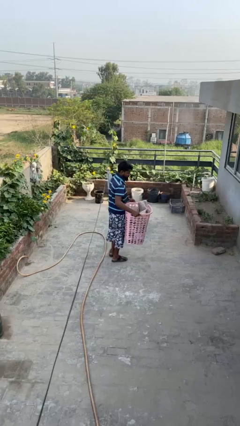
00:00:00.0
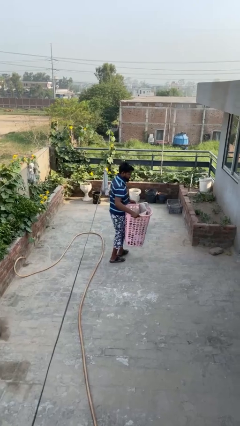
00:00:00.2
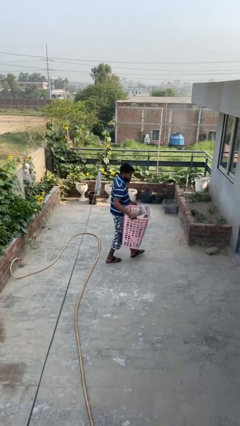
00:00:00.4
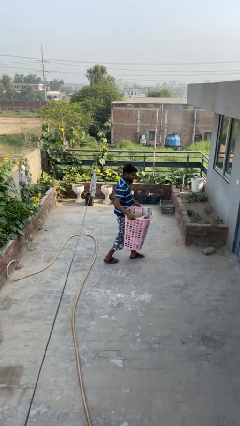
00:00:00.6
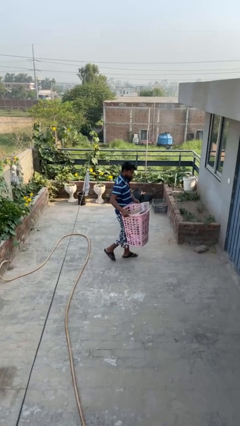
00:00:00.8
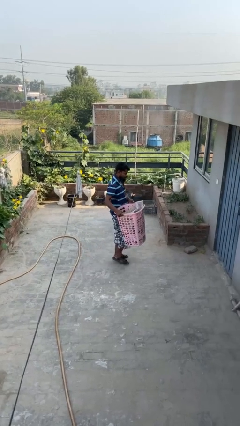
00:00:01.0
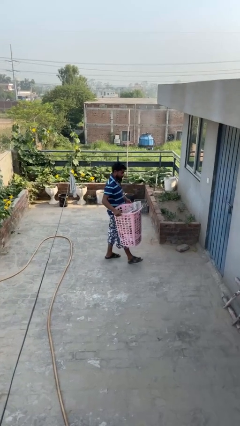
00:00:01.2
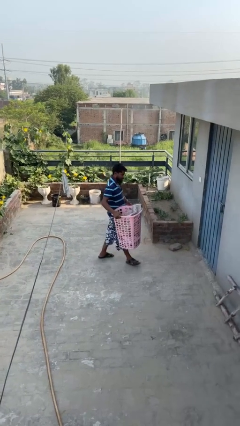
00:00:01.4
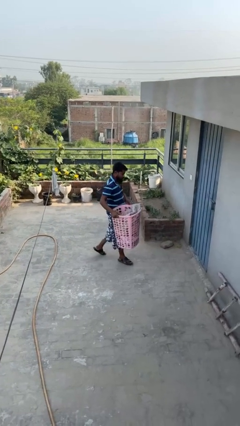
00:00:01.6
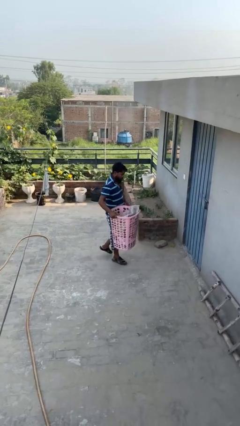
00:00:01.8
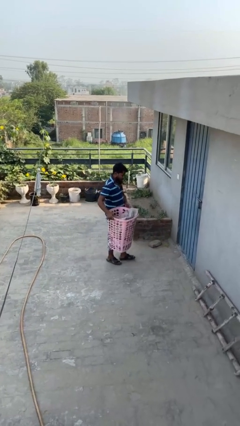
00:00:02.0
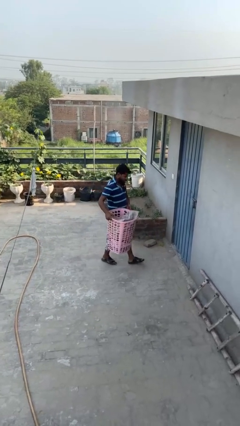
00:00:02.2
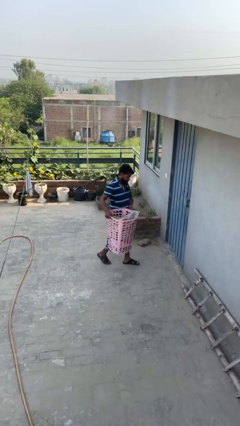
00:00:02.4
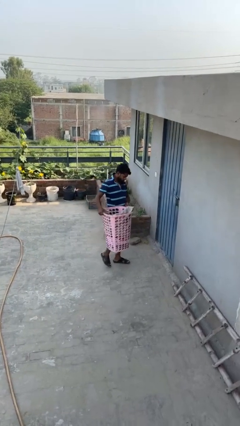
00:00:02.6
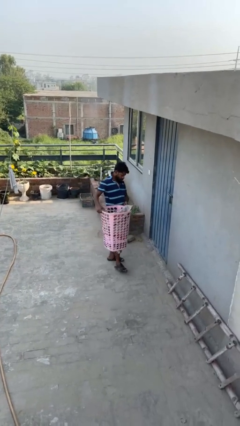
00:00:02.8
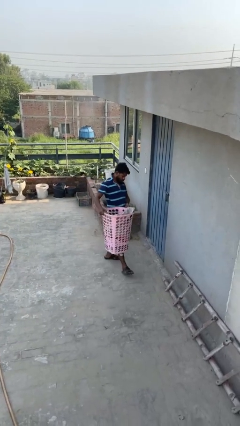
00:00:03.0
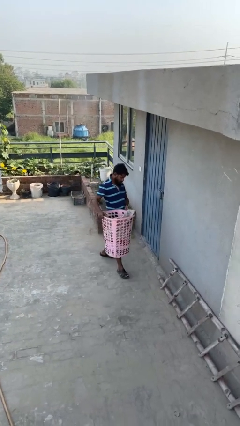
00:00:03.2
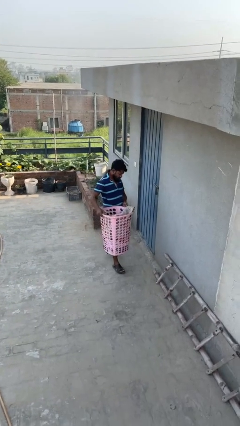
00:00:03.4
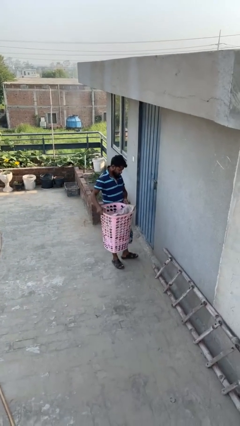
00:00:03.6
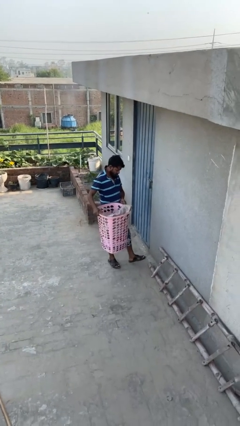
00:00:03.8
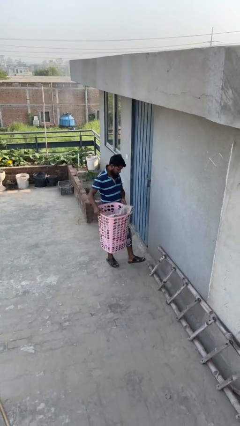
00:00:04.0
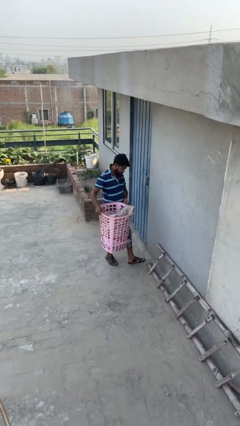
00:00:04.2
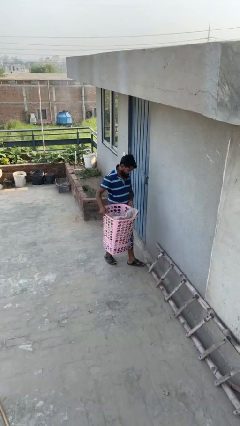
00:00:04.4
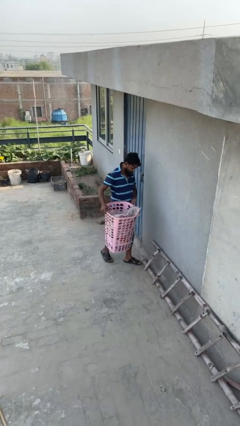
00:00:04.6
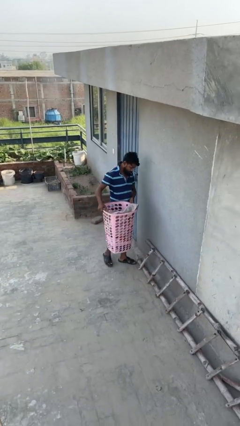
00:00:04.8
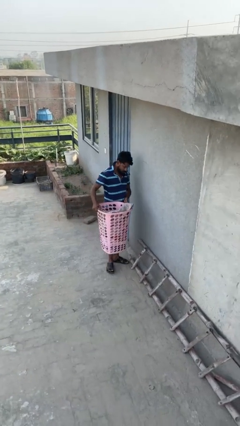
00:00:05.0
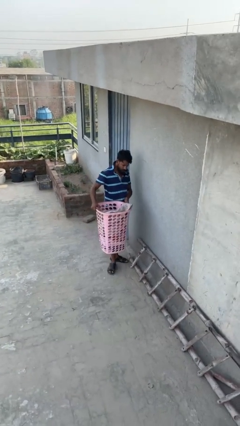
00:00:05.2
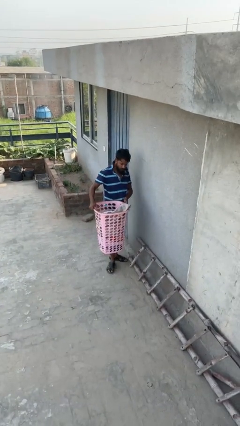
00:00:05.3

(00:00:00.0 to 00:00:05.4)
person carries laundry basket

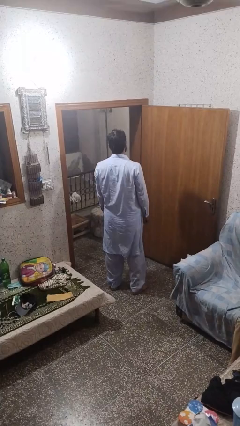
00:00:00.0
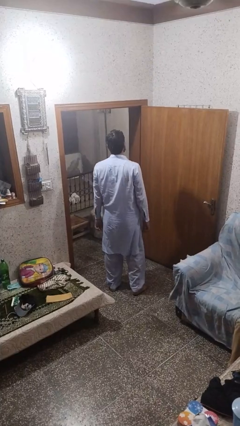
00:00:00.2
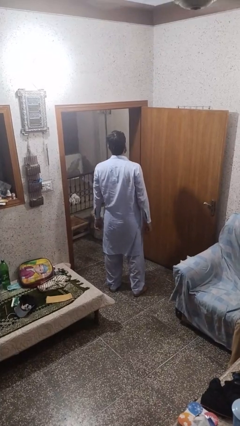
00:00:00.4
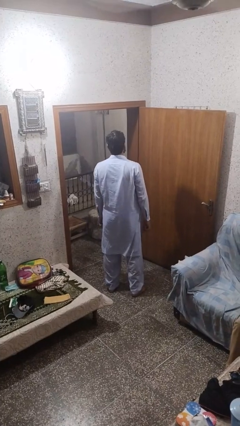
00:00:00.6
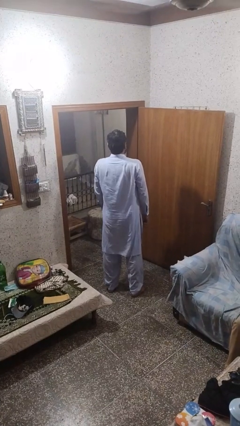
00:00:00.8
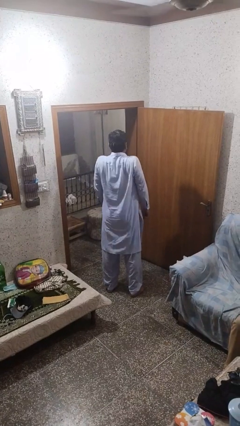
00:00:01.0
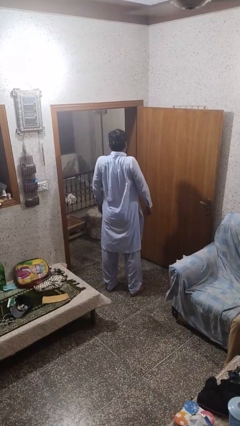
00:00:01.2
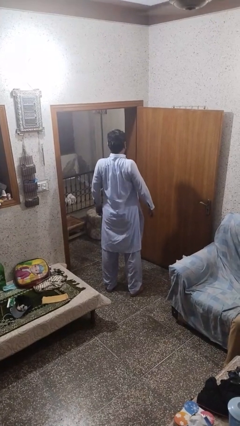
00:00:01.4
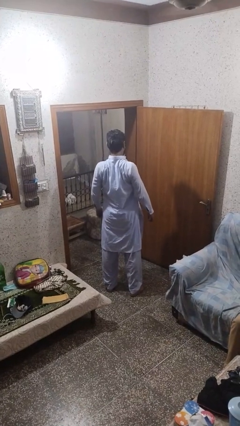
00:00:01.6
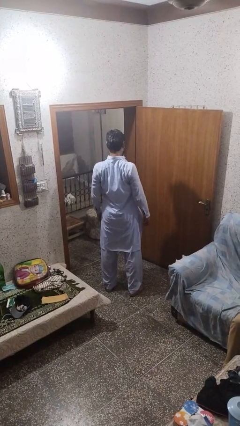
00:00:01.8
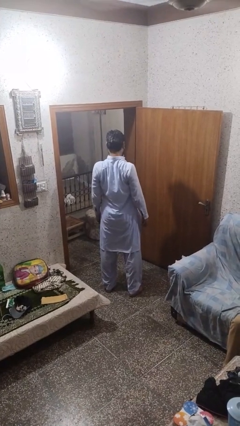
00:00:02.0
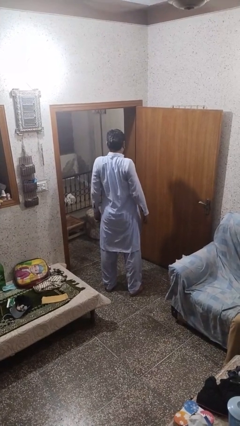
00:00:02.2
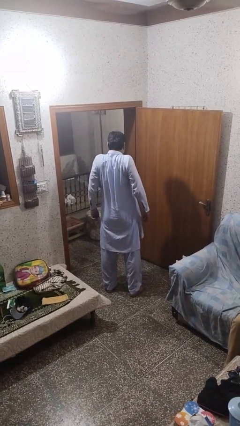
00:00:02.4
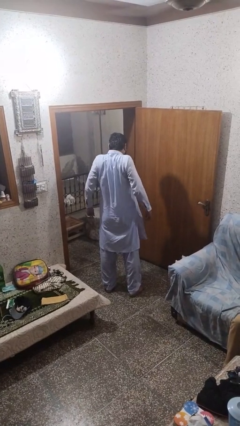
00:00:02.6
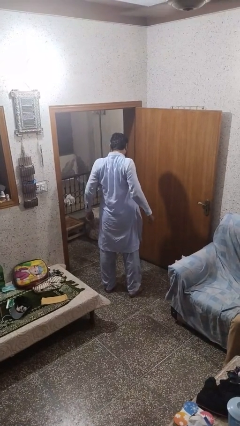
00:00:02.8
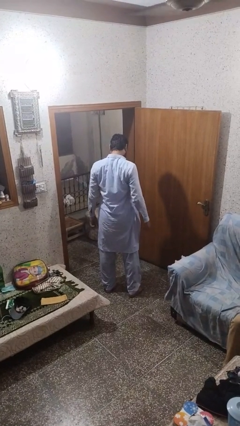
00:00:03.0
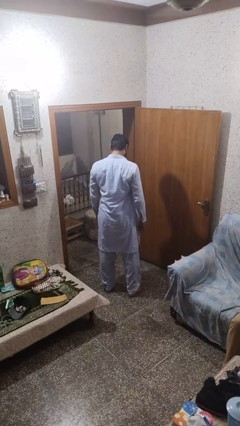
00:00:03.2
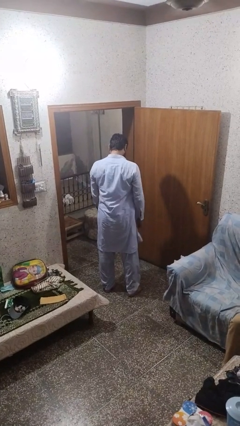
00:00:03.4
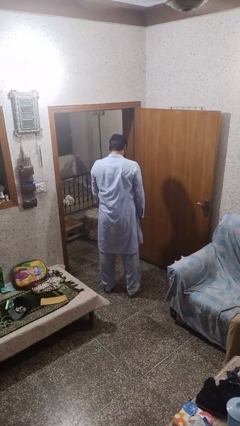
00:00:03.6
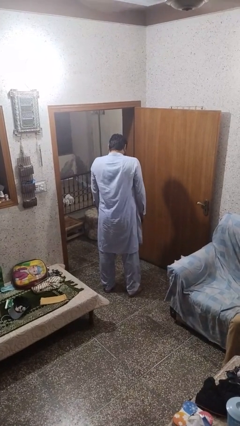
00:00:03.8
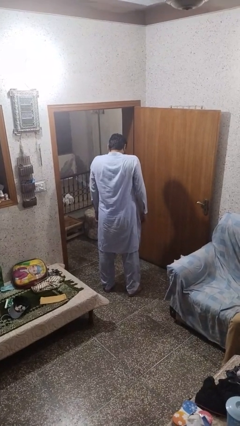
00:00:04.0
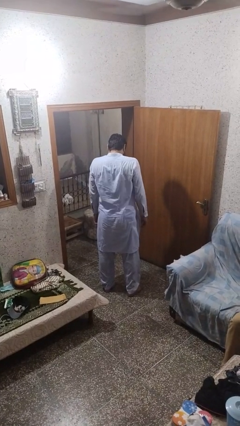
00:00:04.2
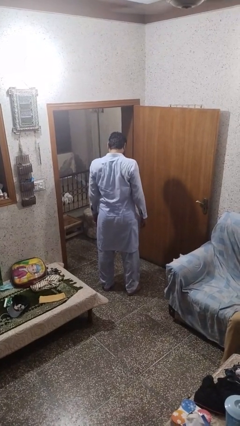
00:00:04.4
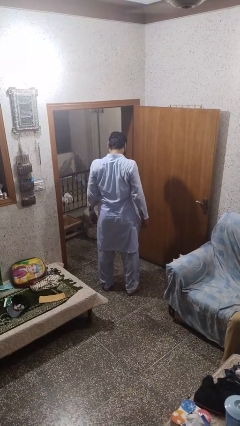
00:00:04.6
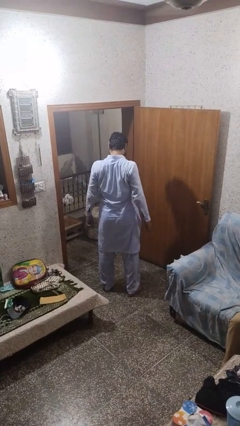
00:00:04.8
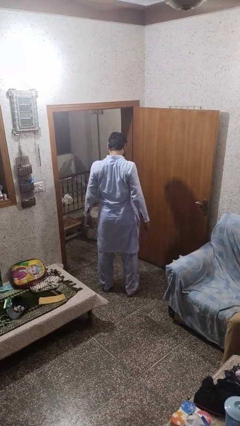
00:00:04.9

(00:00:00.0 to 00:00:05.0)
person stretches back

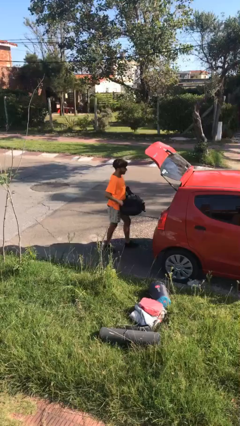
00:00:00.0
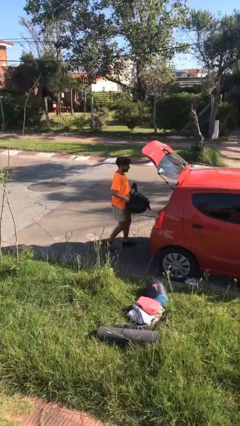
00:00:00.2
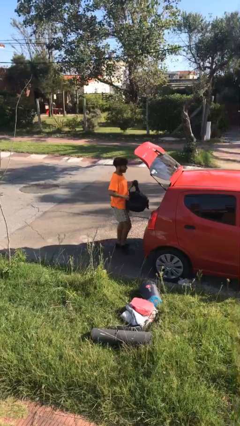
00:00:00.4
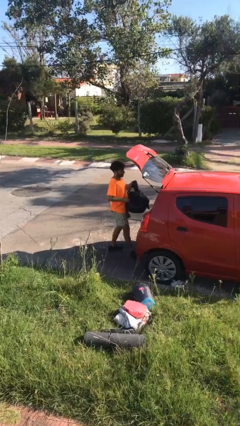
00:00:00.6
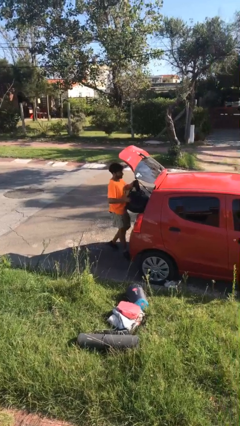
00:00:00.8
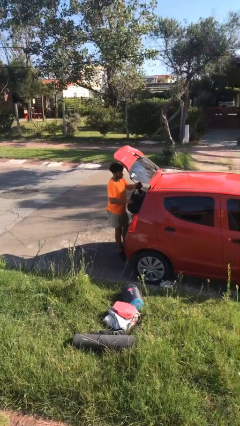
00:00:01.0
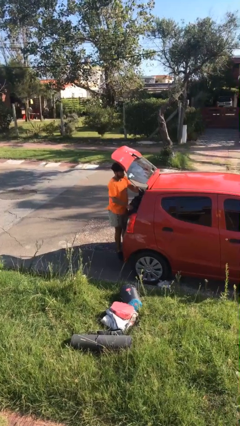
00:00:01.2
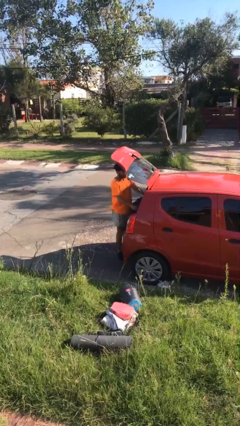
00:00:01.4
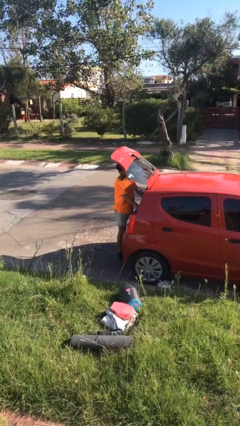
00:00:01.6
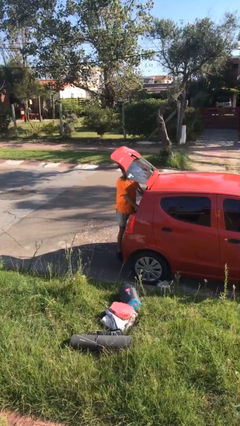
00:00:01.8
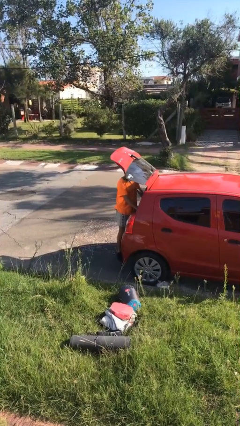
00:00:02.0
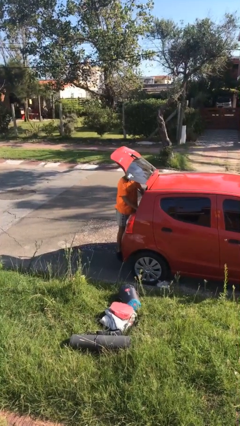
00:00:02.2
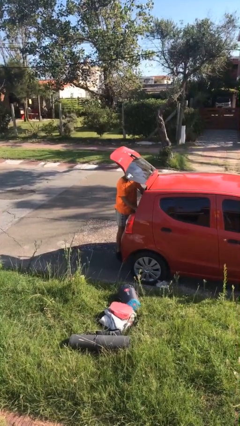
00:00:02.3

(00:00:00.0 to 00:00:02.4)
person loads car

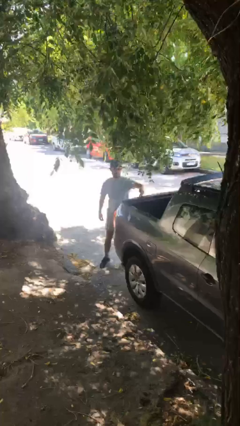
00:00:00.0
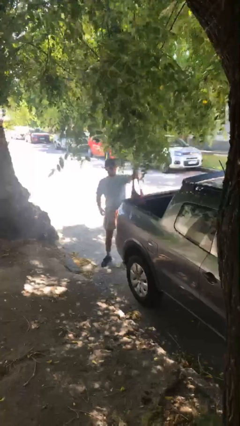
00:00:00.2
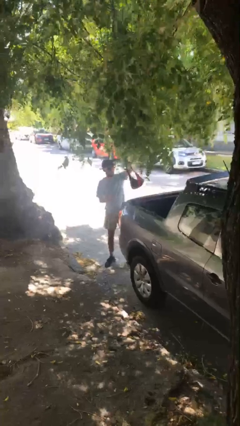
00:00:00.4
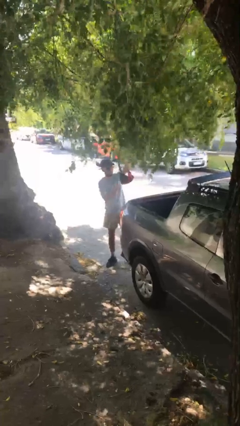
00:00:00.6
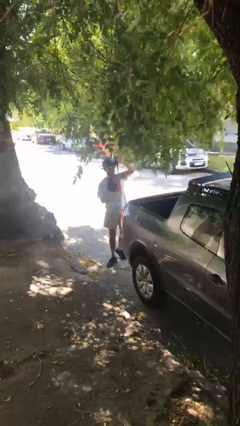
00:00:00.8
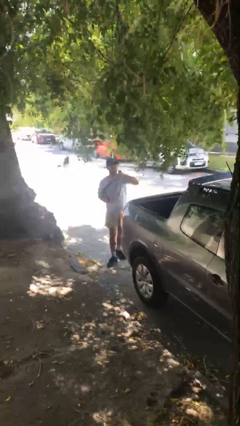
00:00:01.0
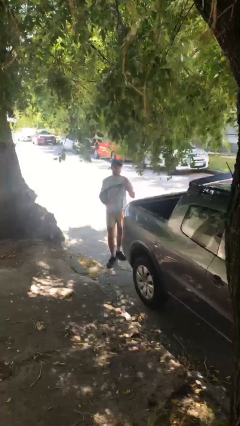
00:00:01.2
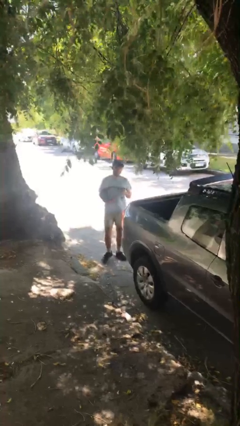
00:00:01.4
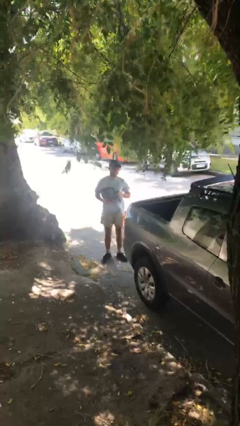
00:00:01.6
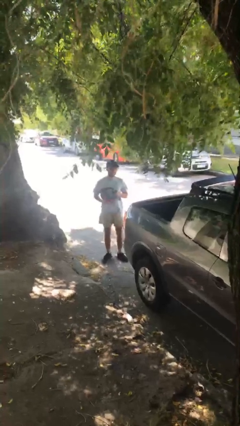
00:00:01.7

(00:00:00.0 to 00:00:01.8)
person unloads car

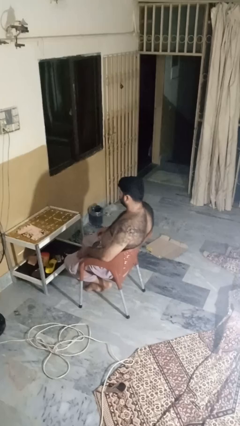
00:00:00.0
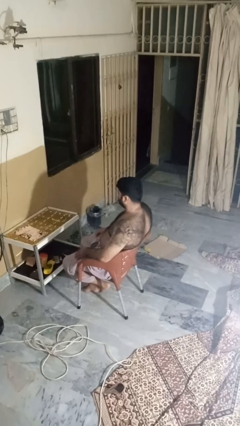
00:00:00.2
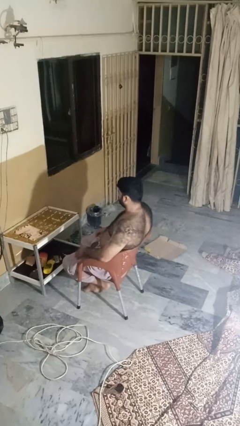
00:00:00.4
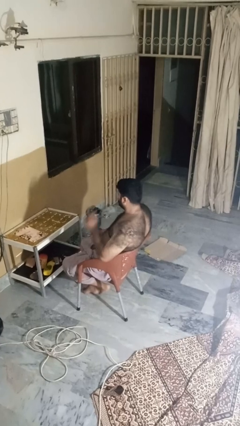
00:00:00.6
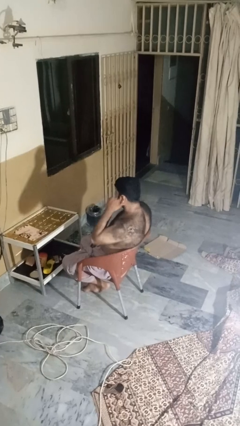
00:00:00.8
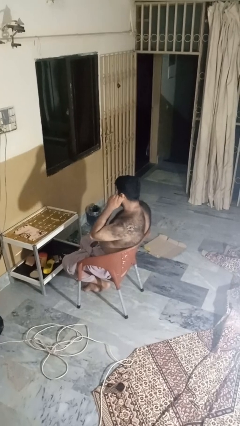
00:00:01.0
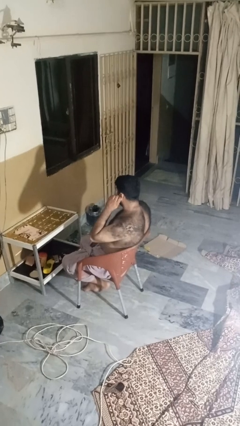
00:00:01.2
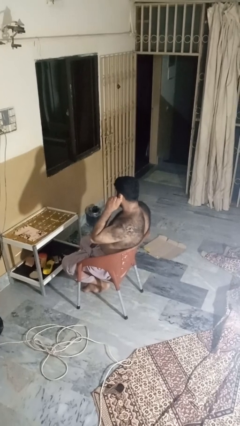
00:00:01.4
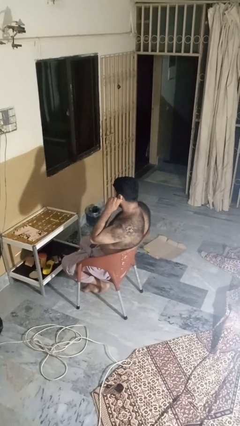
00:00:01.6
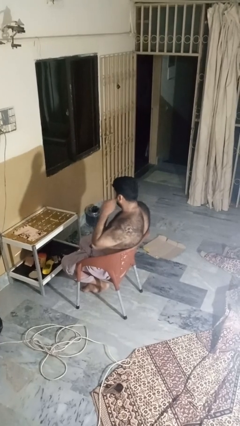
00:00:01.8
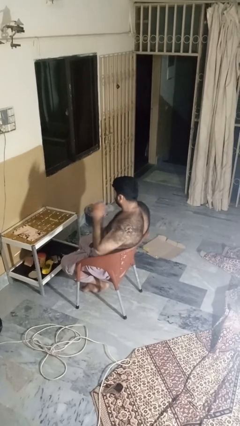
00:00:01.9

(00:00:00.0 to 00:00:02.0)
person touches earlobe

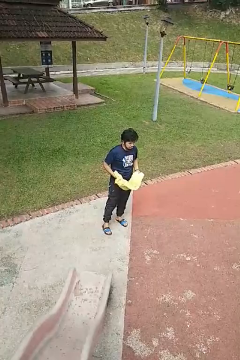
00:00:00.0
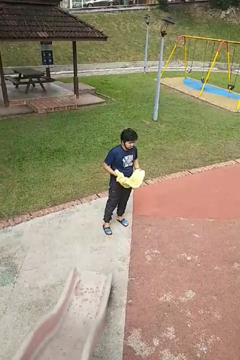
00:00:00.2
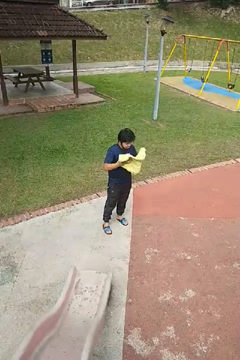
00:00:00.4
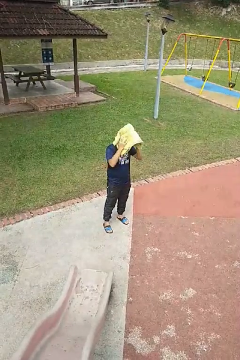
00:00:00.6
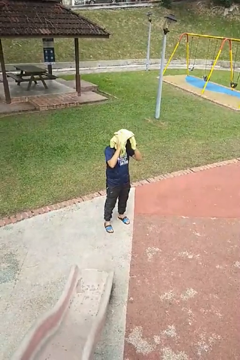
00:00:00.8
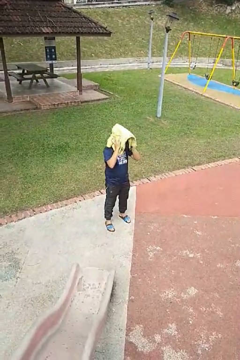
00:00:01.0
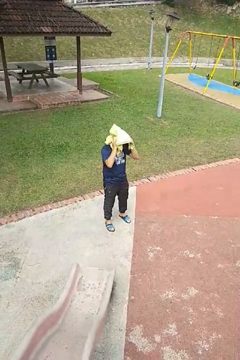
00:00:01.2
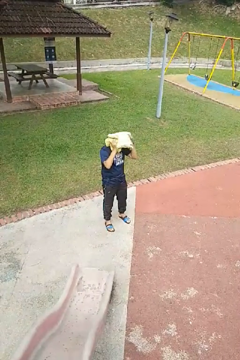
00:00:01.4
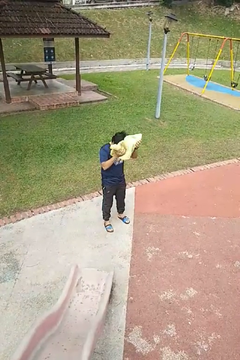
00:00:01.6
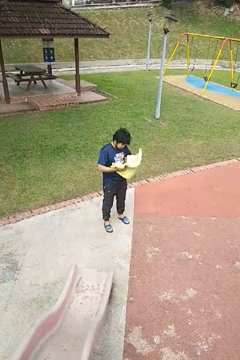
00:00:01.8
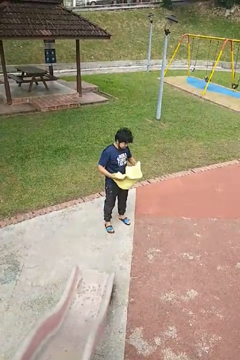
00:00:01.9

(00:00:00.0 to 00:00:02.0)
person dries hair with towel
